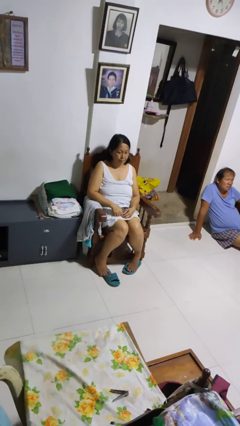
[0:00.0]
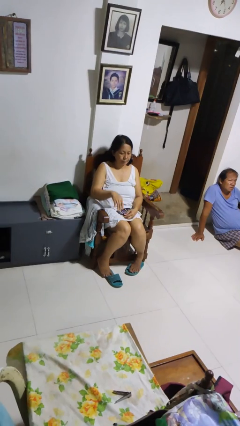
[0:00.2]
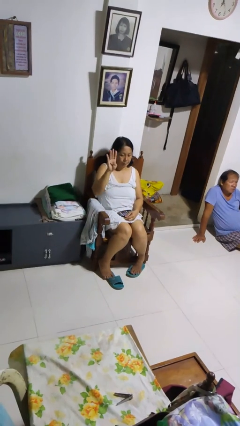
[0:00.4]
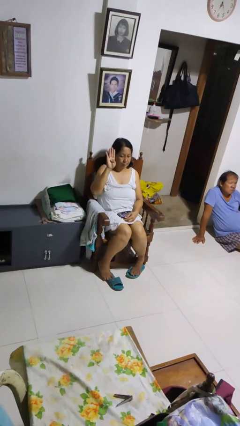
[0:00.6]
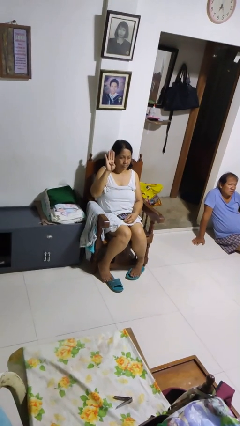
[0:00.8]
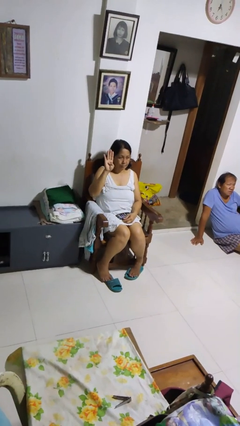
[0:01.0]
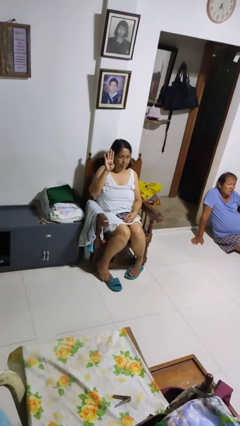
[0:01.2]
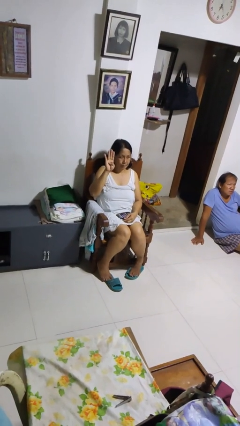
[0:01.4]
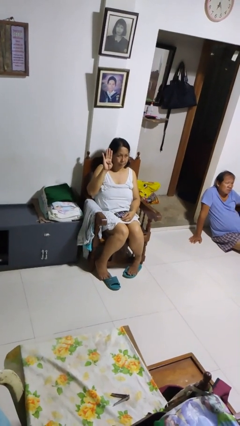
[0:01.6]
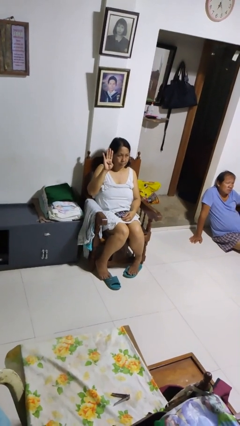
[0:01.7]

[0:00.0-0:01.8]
person gestures number four

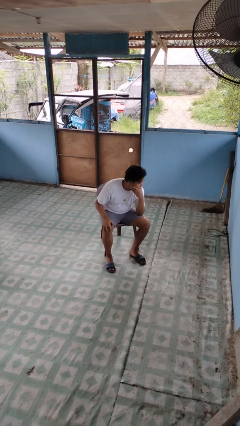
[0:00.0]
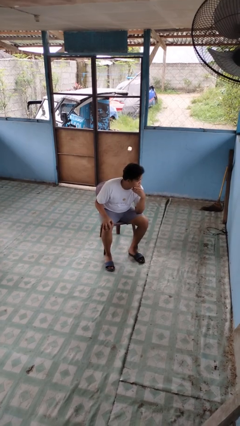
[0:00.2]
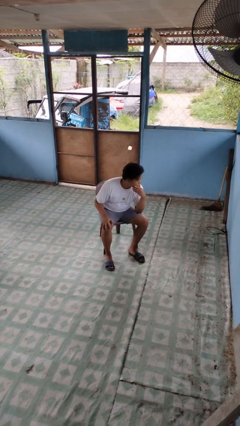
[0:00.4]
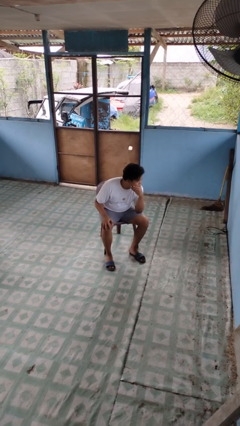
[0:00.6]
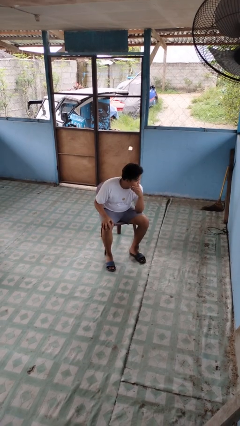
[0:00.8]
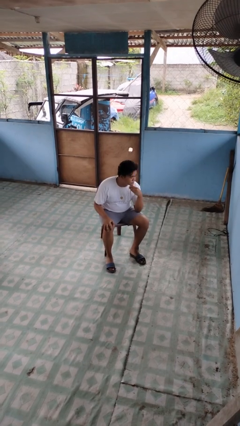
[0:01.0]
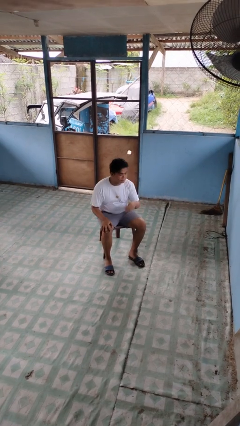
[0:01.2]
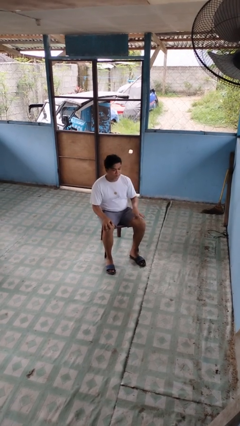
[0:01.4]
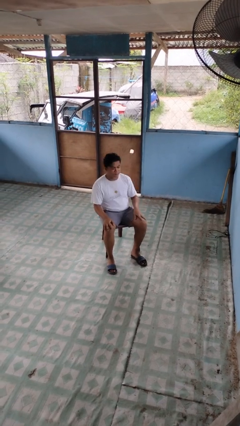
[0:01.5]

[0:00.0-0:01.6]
person strokes chin

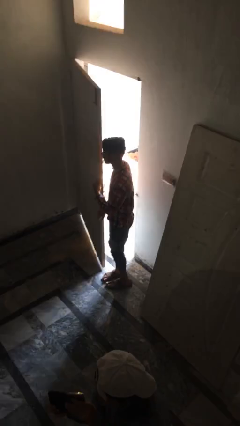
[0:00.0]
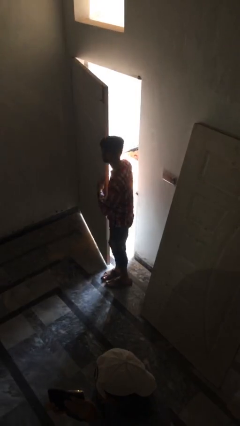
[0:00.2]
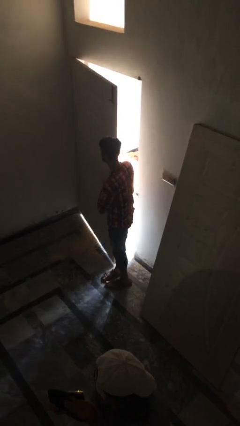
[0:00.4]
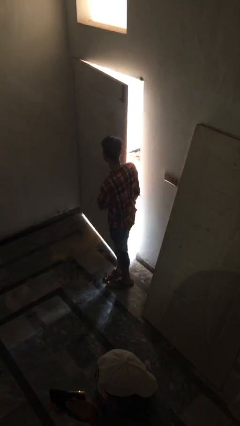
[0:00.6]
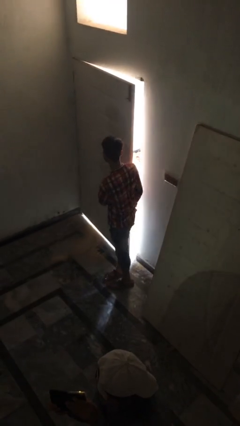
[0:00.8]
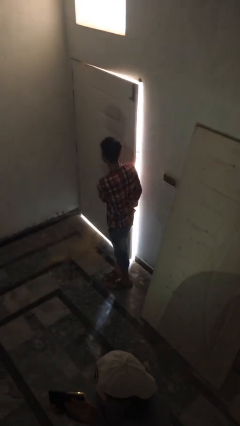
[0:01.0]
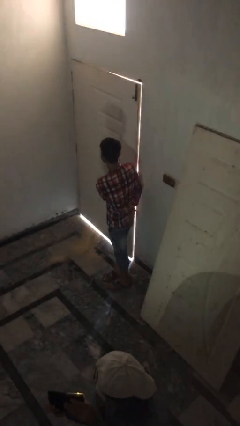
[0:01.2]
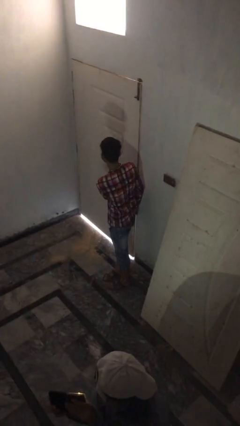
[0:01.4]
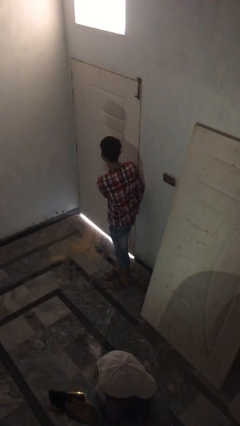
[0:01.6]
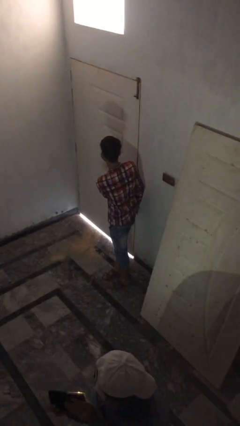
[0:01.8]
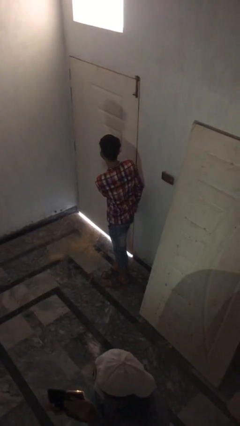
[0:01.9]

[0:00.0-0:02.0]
person closes facility door

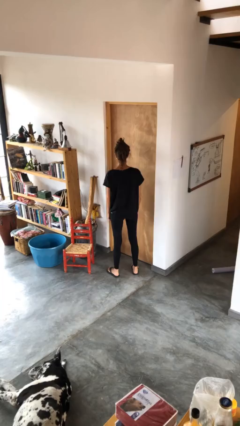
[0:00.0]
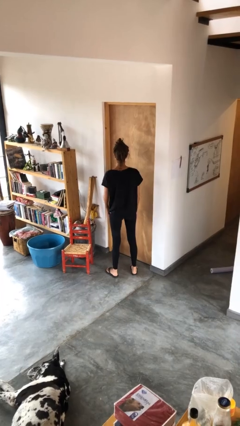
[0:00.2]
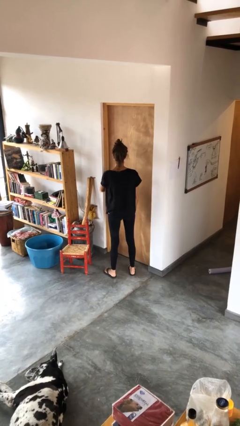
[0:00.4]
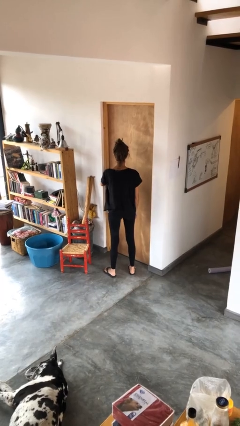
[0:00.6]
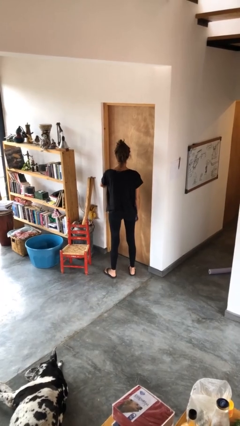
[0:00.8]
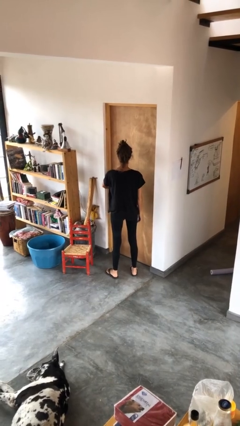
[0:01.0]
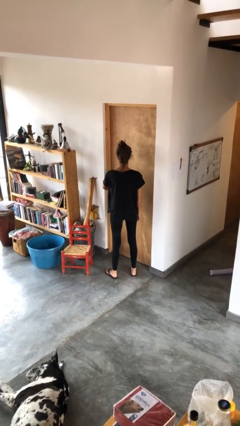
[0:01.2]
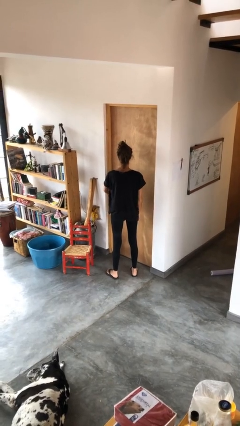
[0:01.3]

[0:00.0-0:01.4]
person unlocks door with keys

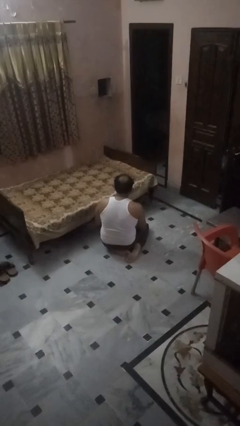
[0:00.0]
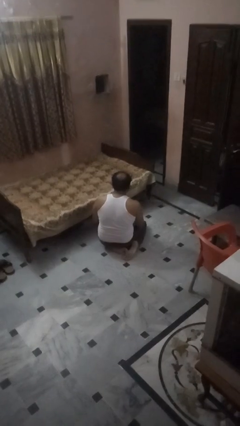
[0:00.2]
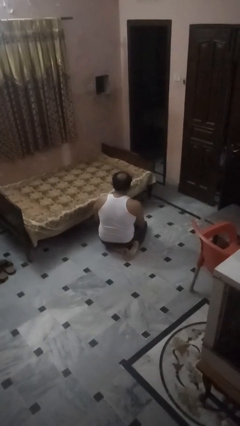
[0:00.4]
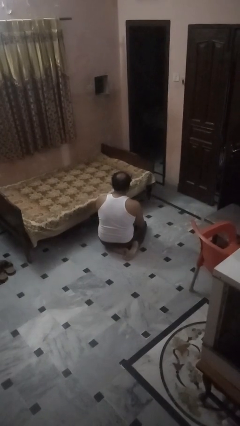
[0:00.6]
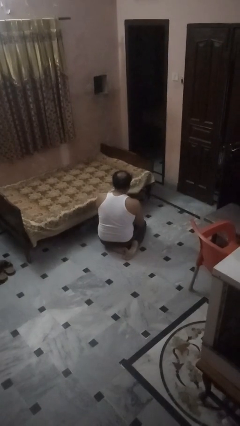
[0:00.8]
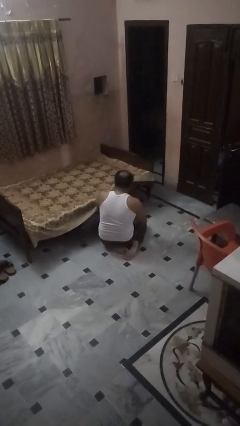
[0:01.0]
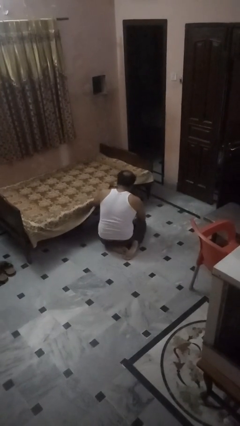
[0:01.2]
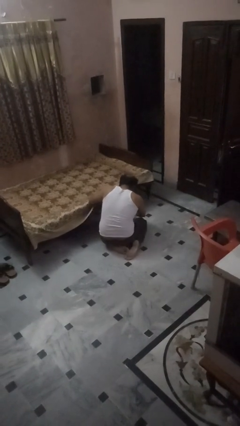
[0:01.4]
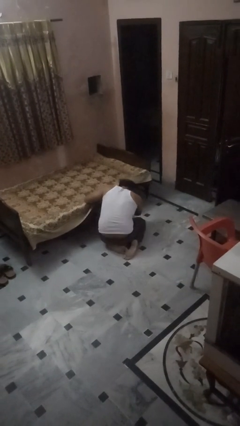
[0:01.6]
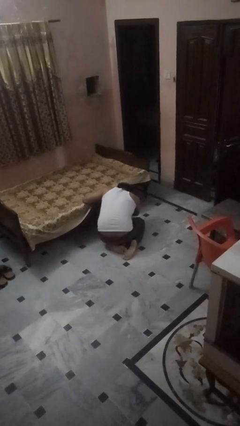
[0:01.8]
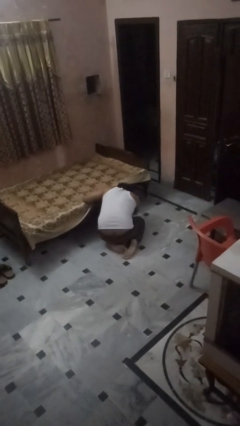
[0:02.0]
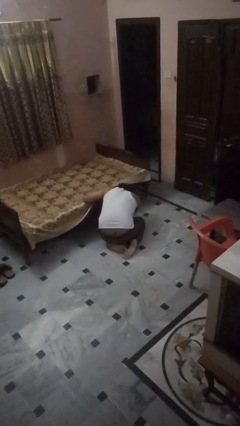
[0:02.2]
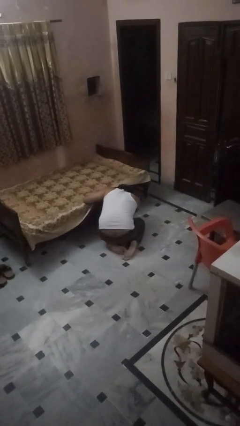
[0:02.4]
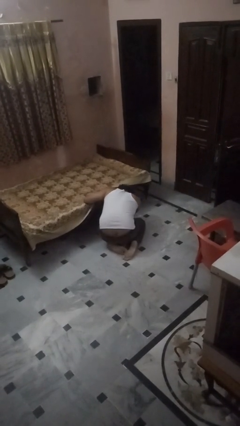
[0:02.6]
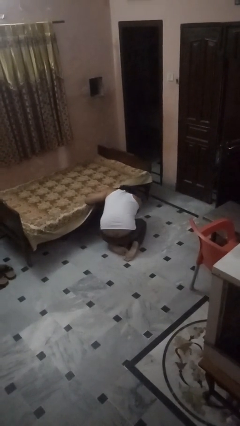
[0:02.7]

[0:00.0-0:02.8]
person searches under bed

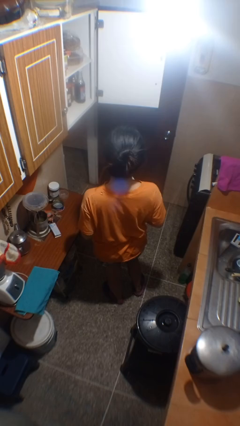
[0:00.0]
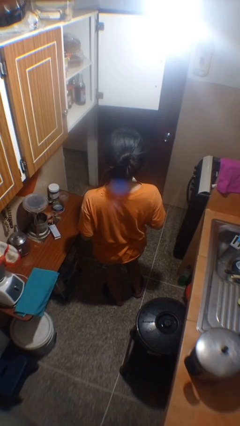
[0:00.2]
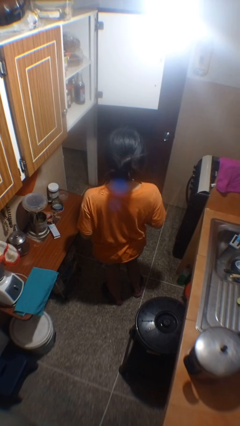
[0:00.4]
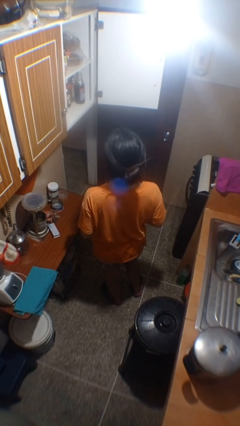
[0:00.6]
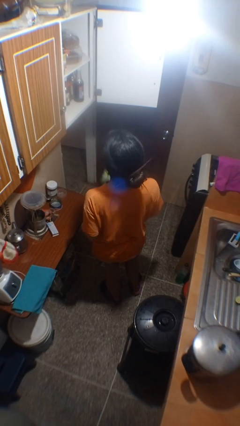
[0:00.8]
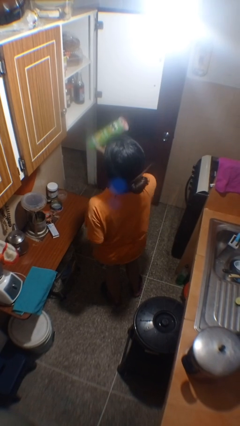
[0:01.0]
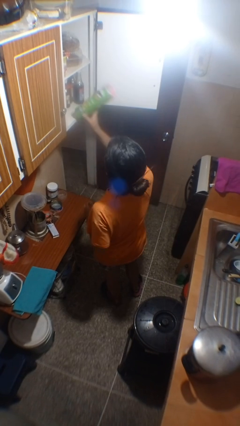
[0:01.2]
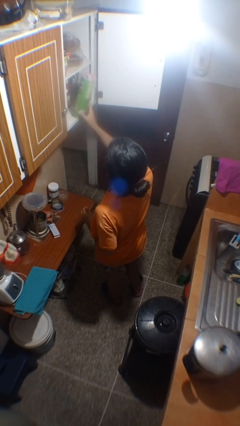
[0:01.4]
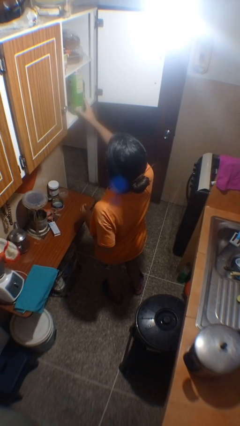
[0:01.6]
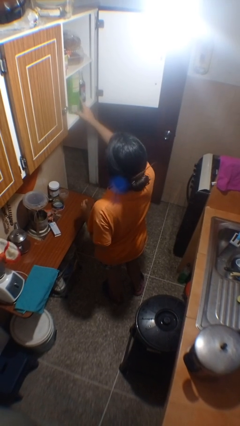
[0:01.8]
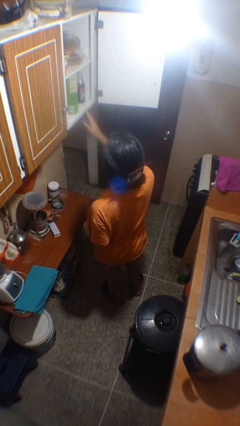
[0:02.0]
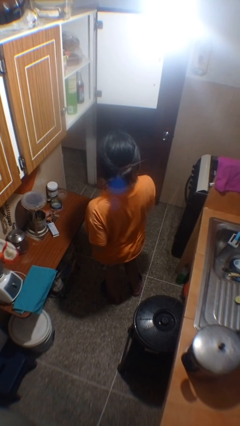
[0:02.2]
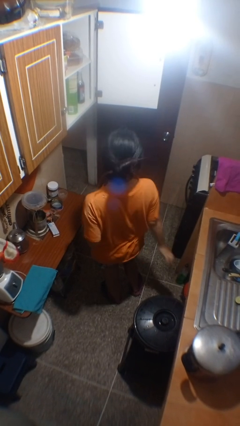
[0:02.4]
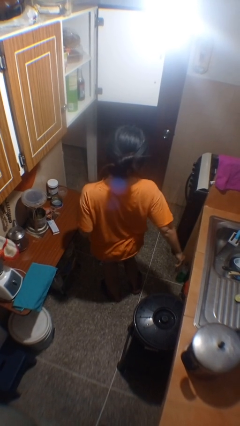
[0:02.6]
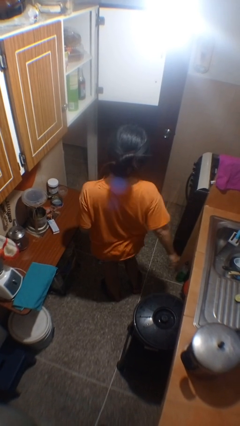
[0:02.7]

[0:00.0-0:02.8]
person puts object in cabinet

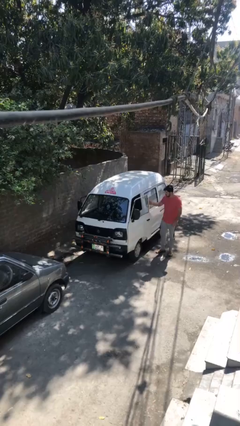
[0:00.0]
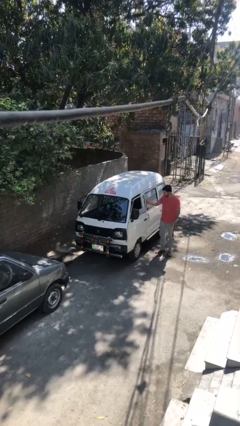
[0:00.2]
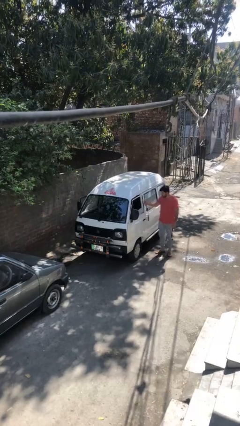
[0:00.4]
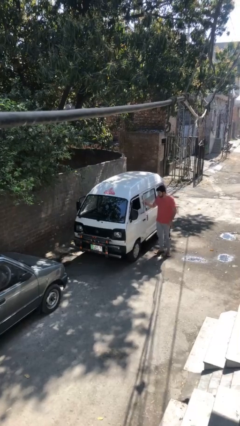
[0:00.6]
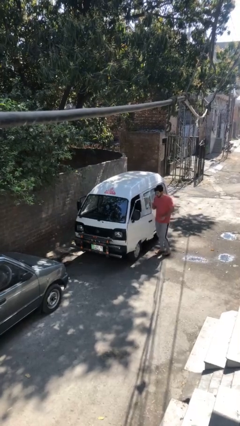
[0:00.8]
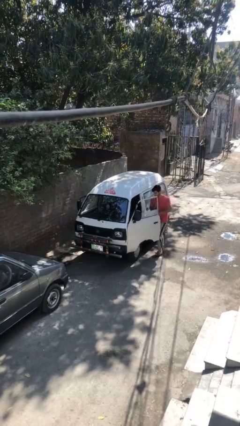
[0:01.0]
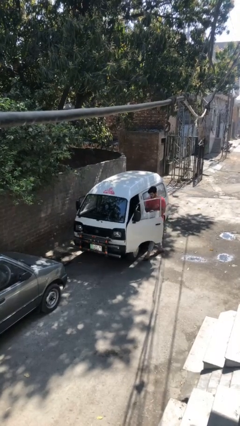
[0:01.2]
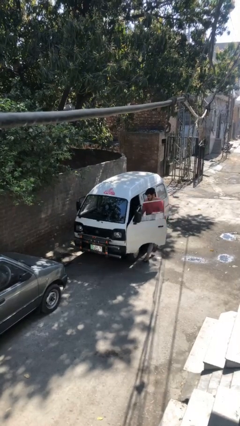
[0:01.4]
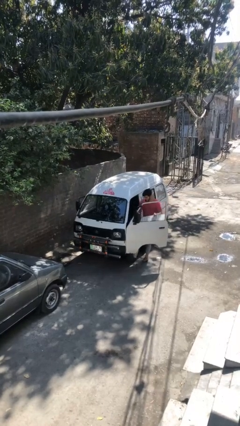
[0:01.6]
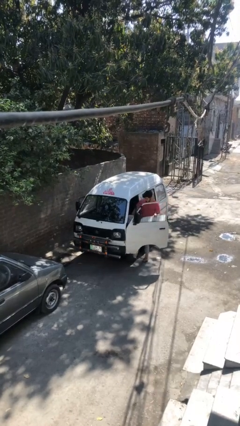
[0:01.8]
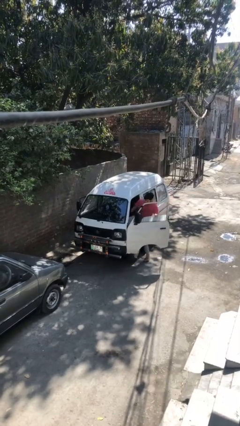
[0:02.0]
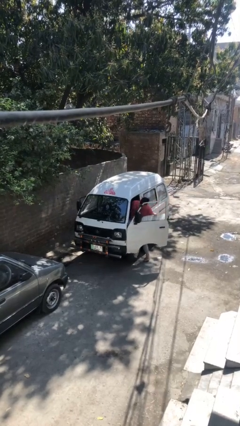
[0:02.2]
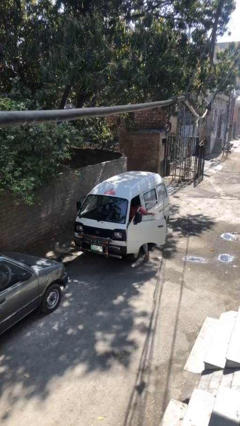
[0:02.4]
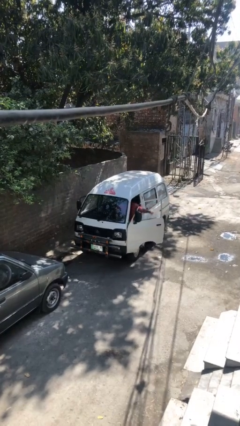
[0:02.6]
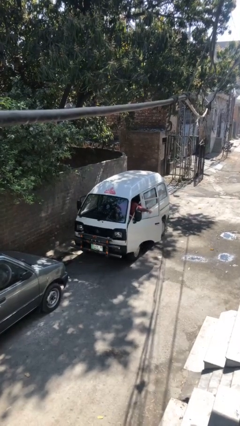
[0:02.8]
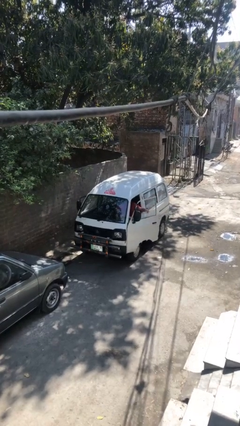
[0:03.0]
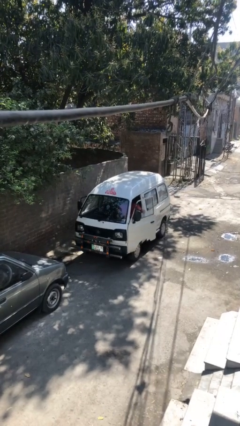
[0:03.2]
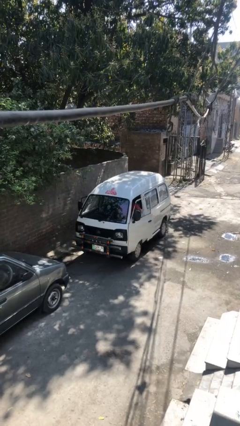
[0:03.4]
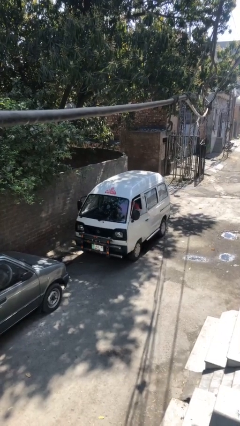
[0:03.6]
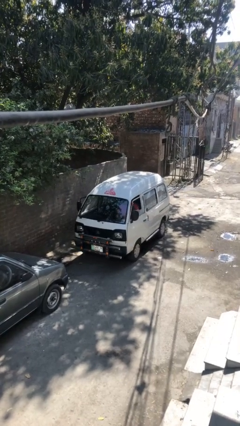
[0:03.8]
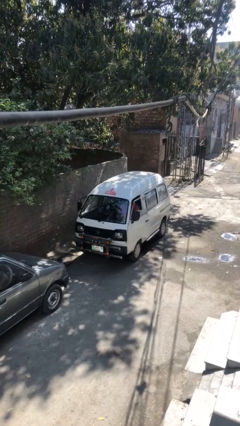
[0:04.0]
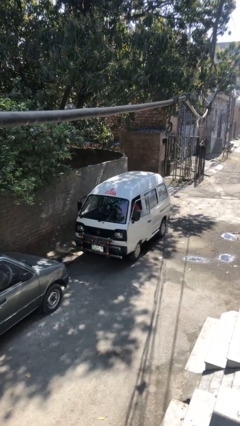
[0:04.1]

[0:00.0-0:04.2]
car picks up person
